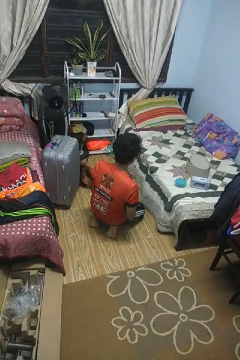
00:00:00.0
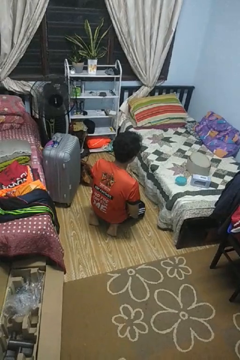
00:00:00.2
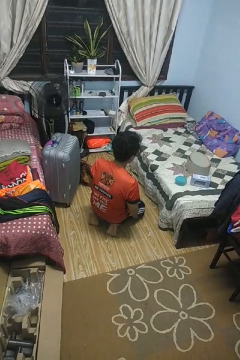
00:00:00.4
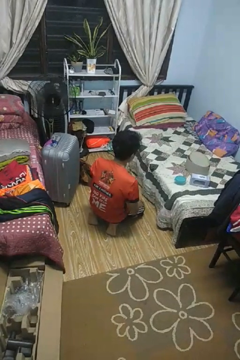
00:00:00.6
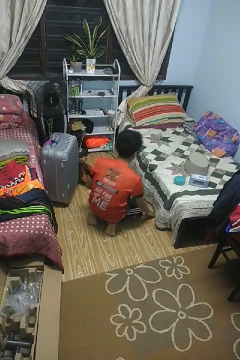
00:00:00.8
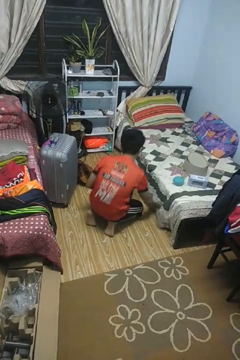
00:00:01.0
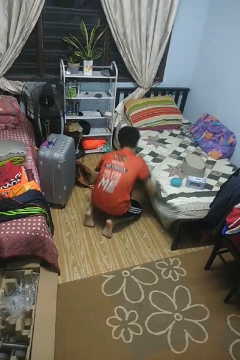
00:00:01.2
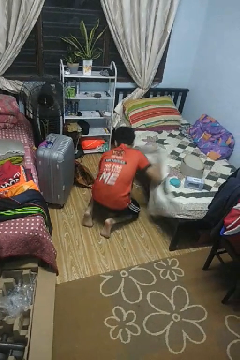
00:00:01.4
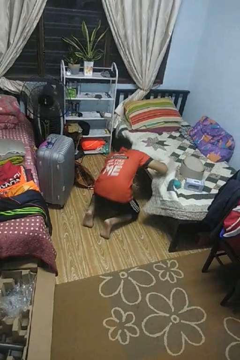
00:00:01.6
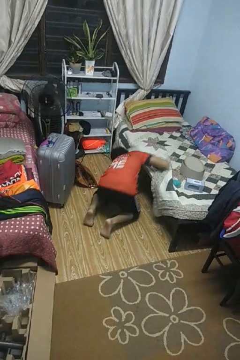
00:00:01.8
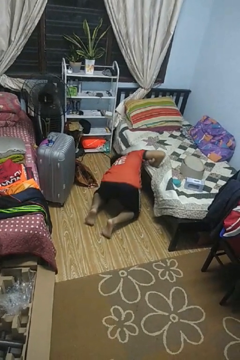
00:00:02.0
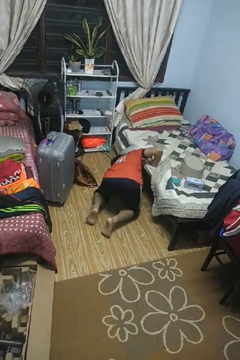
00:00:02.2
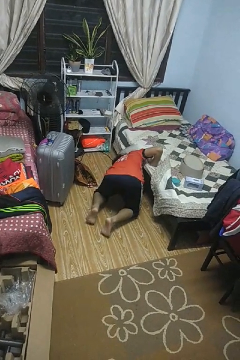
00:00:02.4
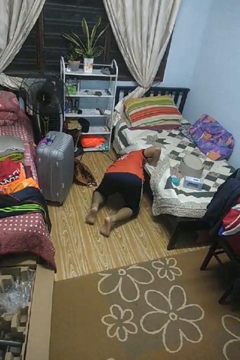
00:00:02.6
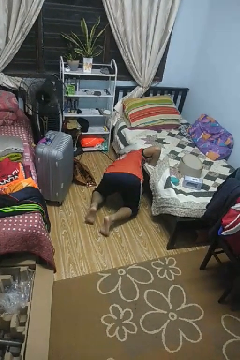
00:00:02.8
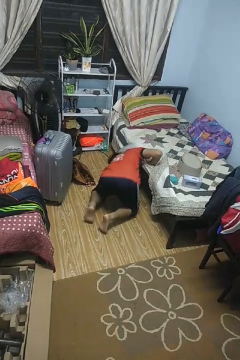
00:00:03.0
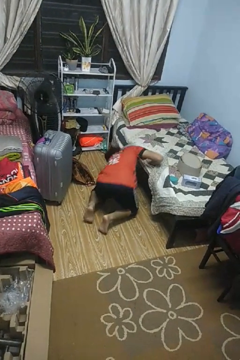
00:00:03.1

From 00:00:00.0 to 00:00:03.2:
person searches under bed

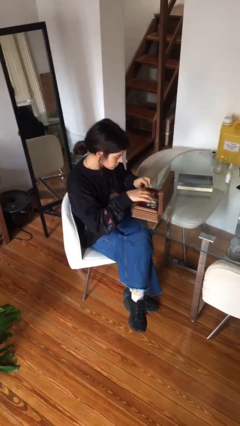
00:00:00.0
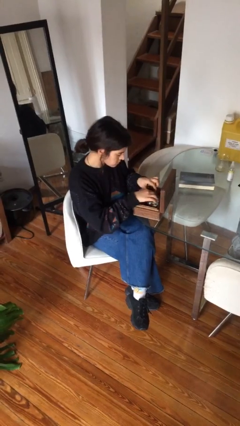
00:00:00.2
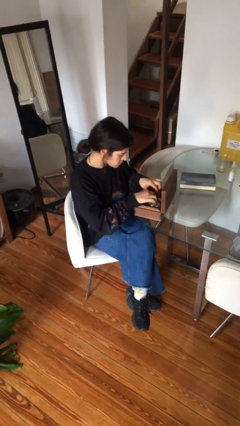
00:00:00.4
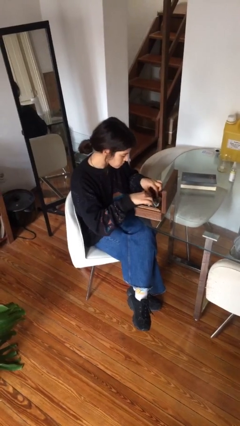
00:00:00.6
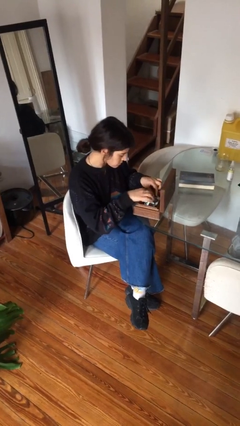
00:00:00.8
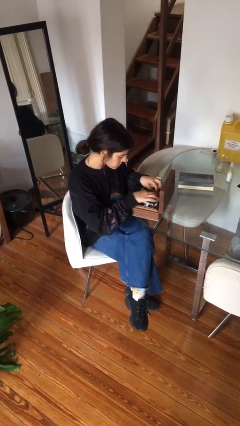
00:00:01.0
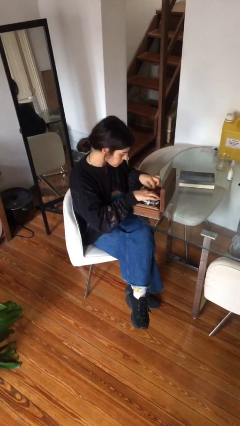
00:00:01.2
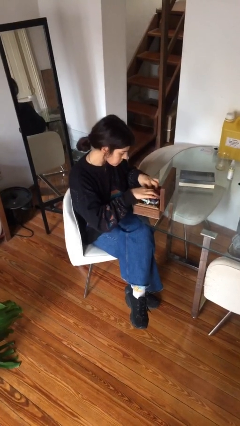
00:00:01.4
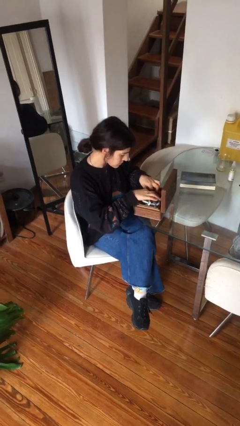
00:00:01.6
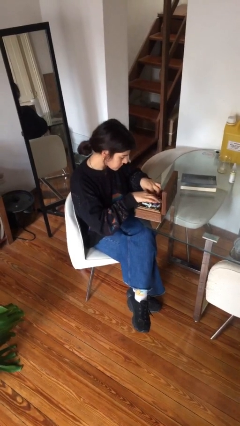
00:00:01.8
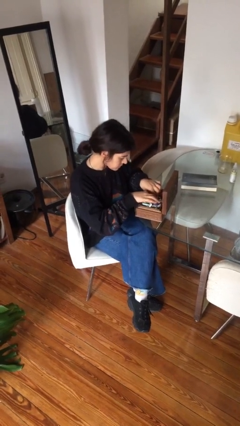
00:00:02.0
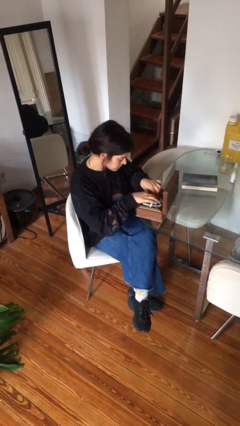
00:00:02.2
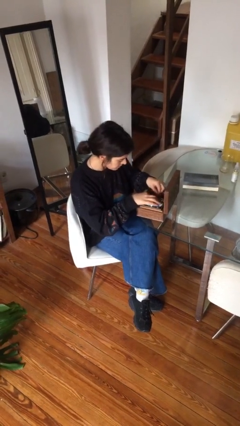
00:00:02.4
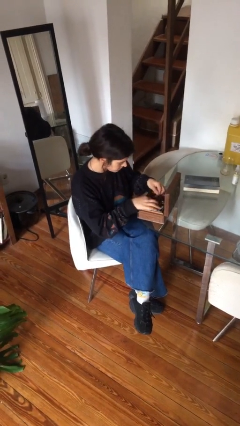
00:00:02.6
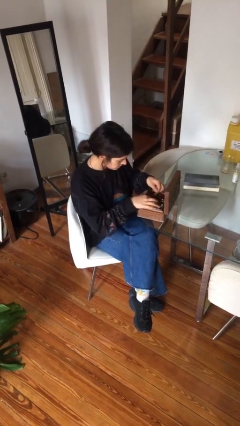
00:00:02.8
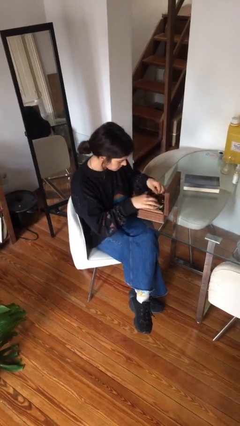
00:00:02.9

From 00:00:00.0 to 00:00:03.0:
person searches jewelry box

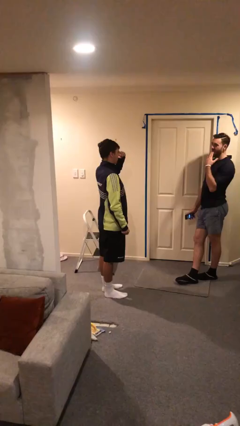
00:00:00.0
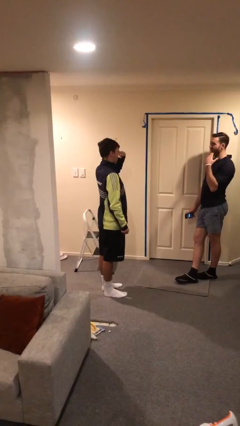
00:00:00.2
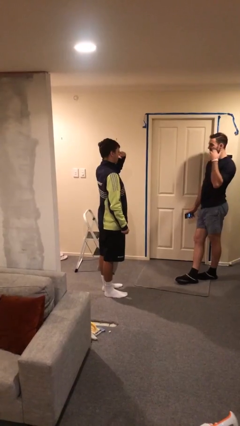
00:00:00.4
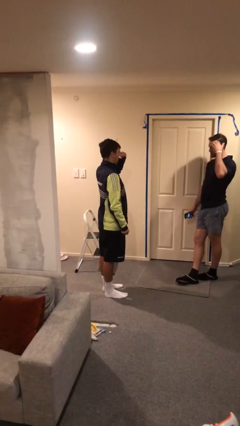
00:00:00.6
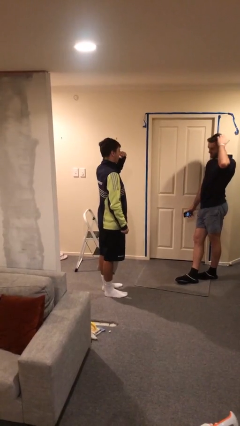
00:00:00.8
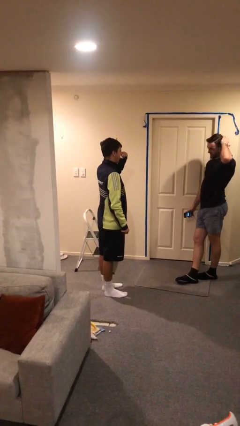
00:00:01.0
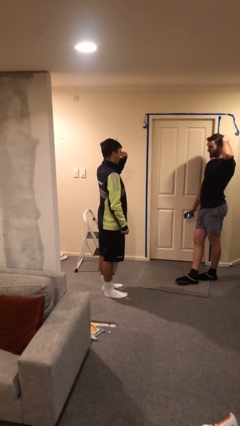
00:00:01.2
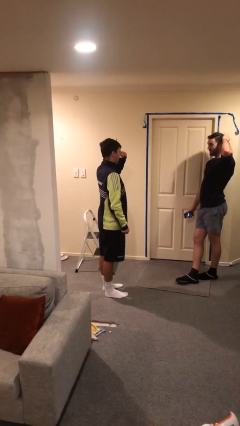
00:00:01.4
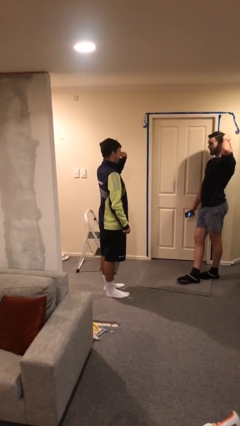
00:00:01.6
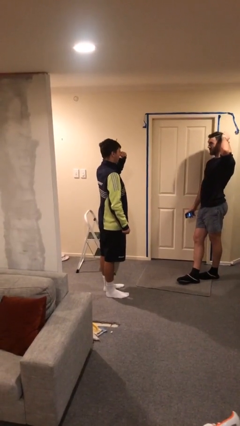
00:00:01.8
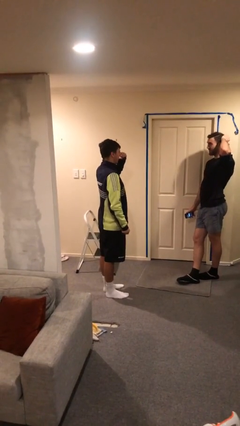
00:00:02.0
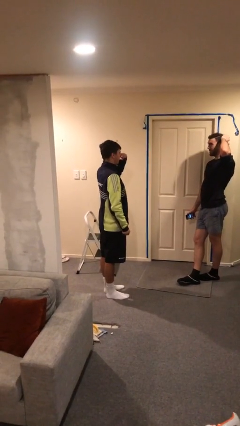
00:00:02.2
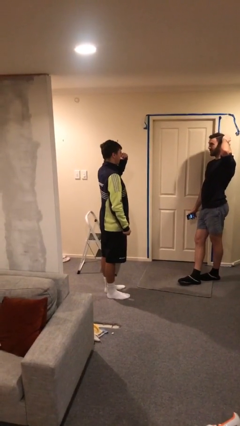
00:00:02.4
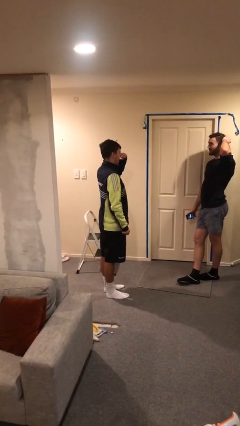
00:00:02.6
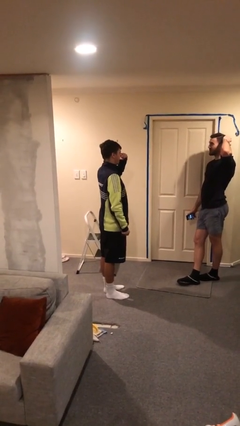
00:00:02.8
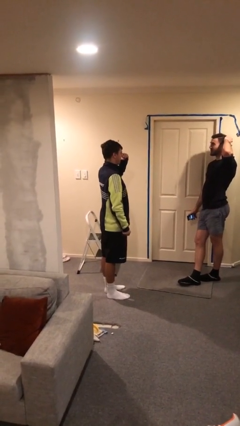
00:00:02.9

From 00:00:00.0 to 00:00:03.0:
person talks to person

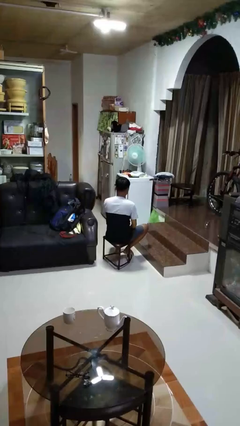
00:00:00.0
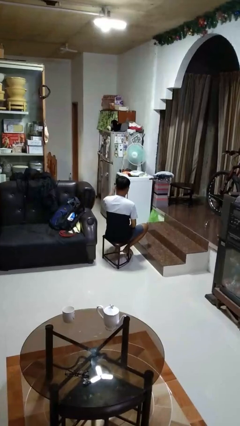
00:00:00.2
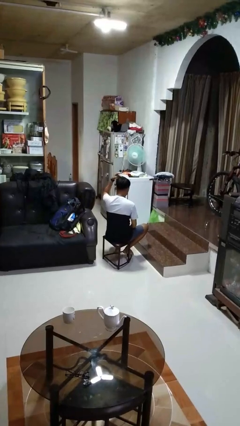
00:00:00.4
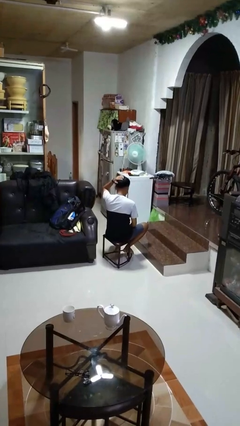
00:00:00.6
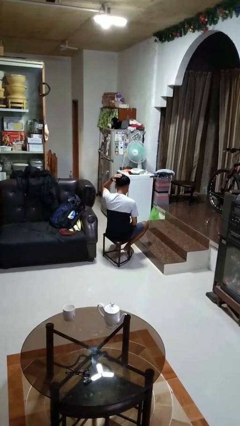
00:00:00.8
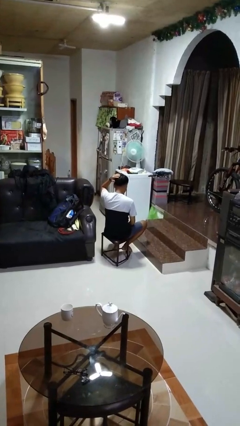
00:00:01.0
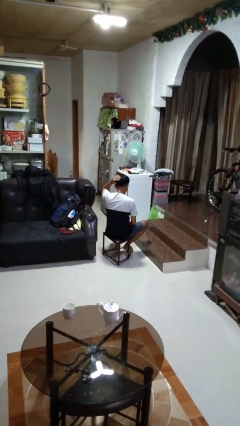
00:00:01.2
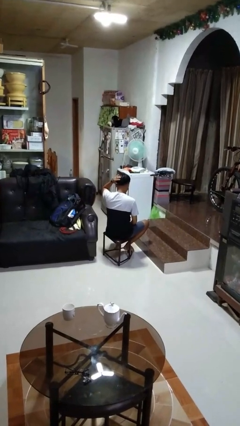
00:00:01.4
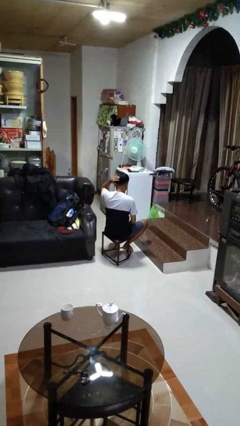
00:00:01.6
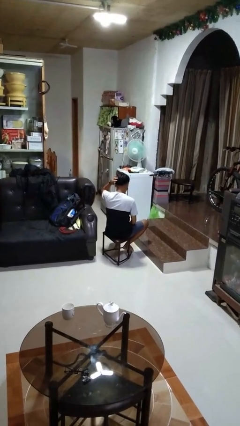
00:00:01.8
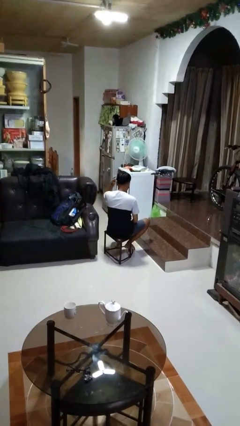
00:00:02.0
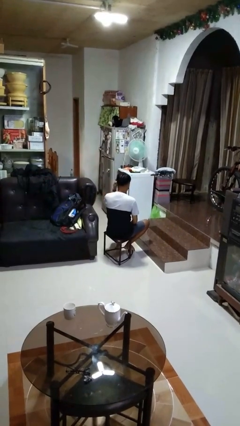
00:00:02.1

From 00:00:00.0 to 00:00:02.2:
person pats head

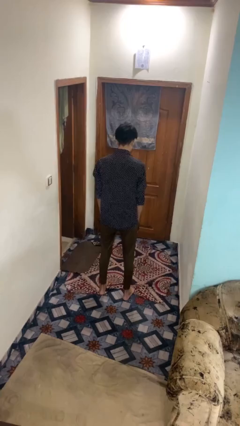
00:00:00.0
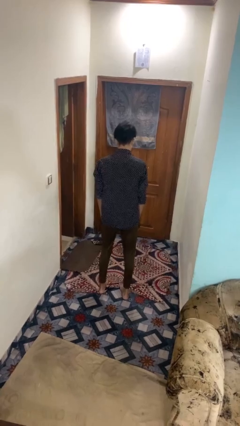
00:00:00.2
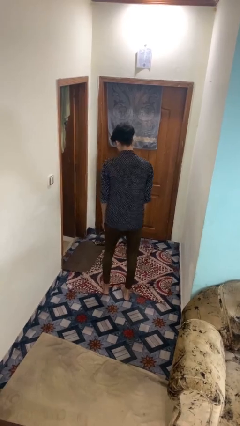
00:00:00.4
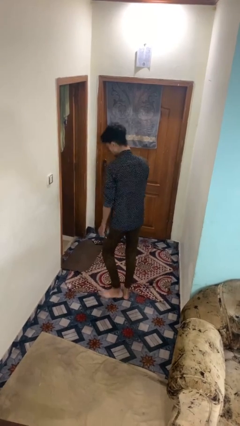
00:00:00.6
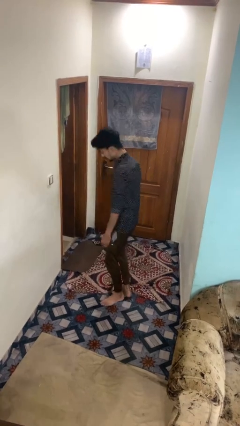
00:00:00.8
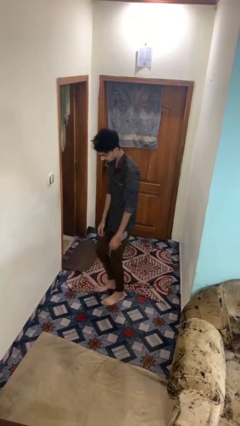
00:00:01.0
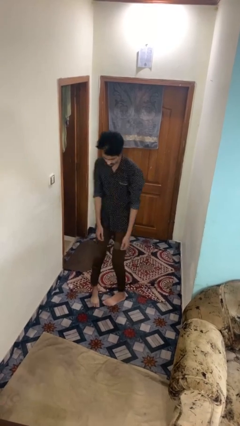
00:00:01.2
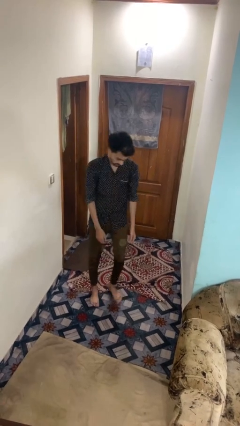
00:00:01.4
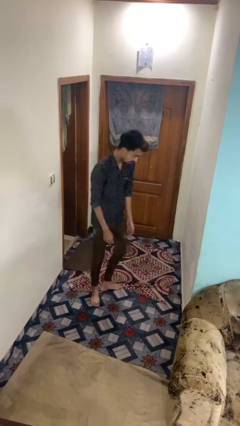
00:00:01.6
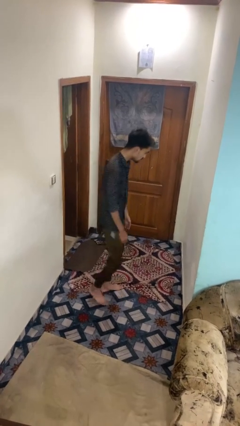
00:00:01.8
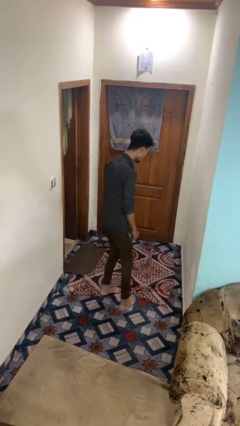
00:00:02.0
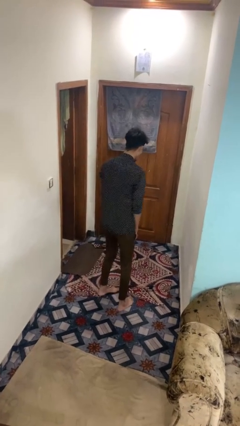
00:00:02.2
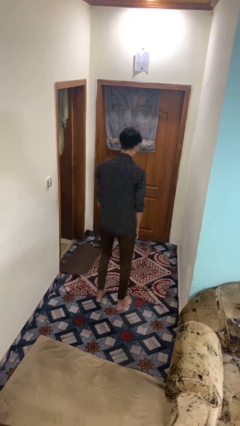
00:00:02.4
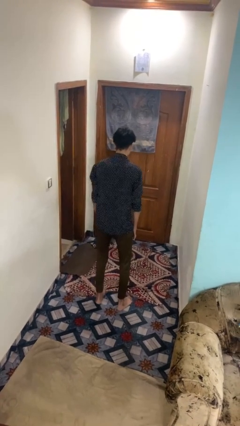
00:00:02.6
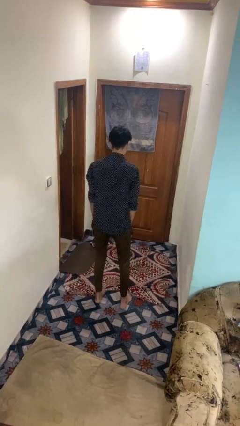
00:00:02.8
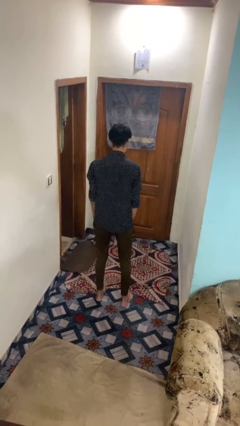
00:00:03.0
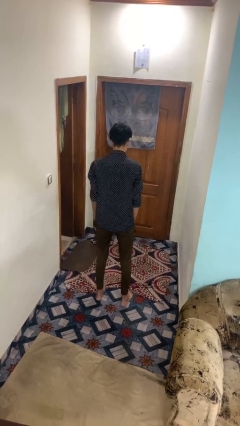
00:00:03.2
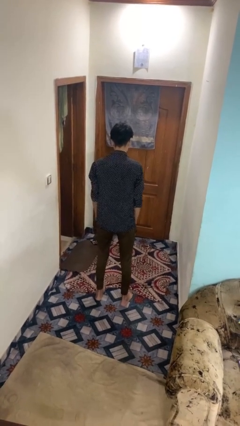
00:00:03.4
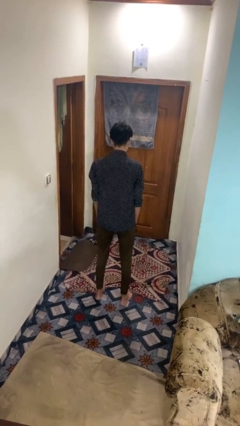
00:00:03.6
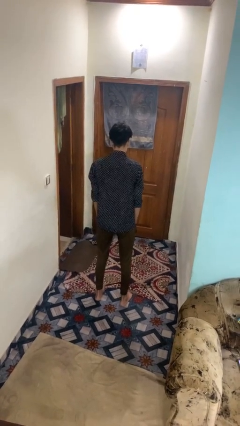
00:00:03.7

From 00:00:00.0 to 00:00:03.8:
person twirls

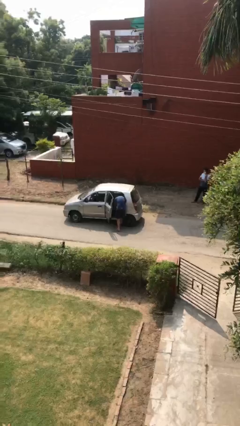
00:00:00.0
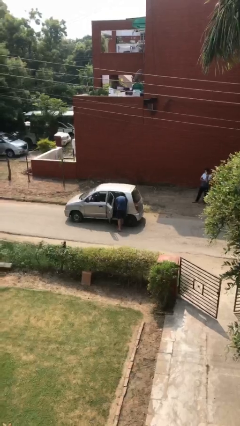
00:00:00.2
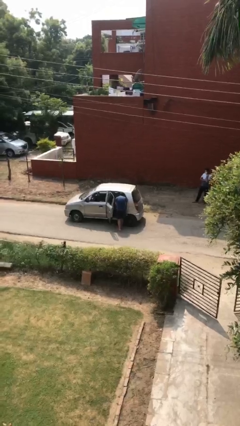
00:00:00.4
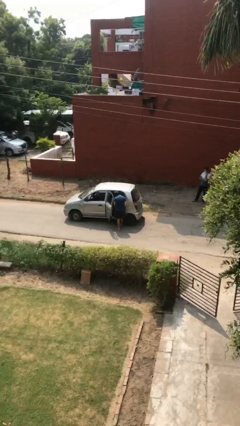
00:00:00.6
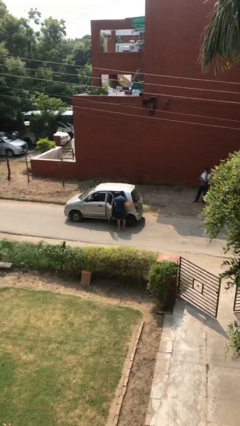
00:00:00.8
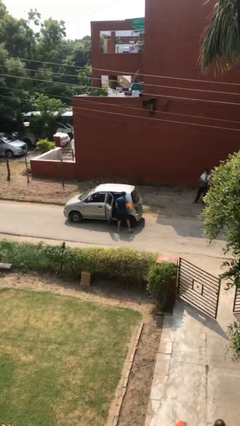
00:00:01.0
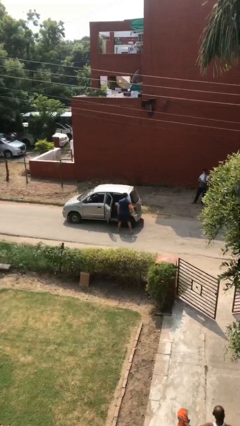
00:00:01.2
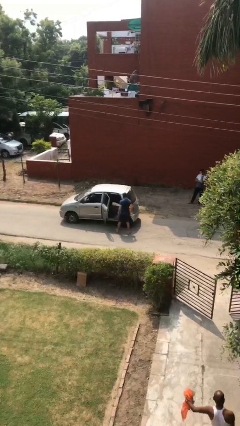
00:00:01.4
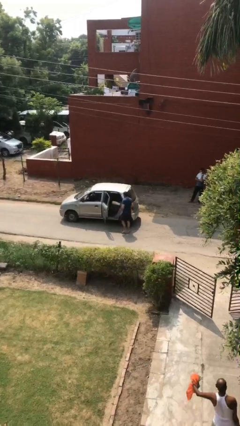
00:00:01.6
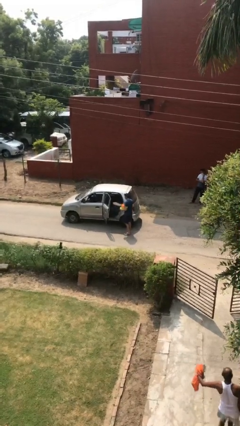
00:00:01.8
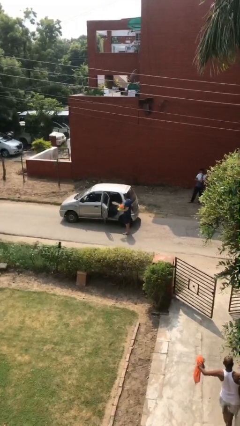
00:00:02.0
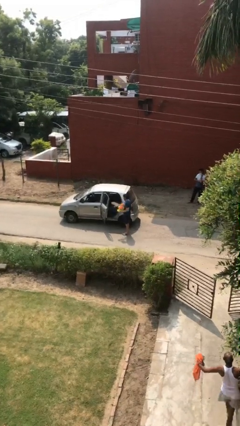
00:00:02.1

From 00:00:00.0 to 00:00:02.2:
person unloads car

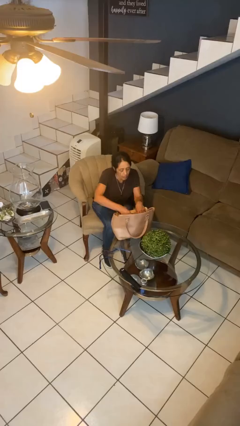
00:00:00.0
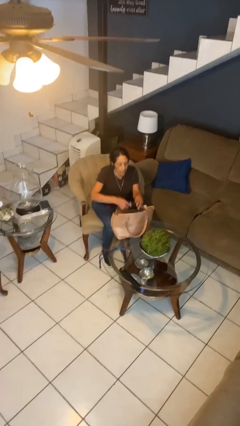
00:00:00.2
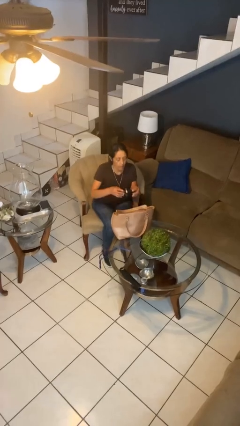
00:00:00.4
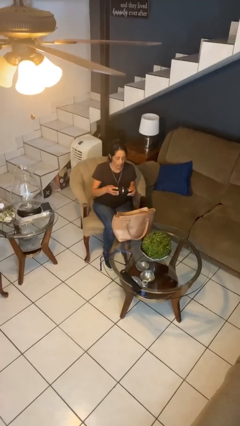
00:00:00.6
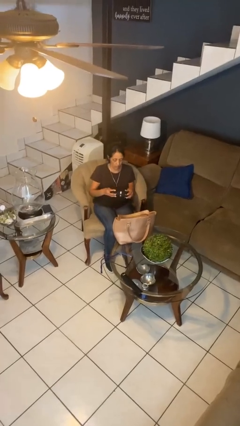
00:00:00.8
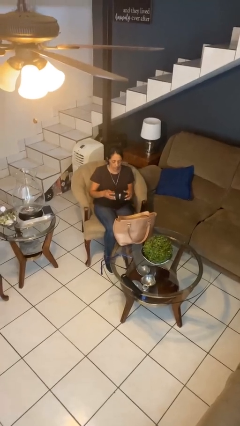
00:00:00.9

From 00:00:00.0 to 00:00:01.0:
person takes object from purse
